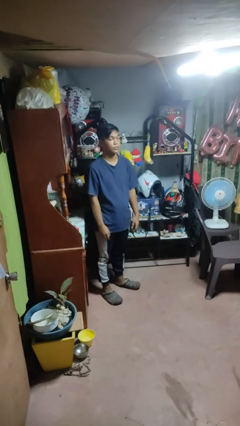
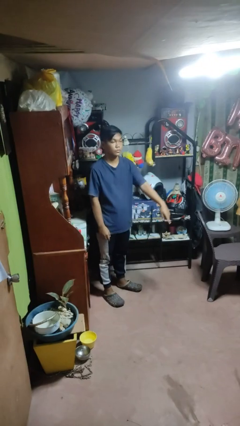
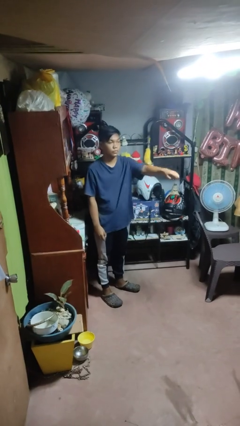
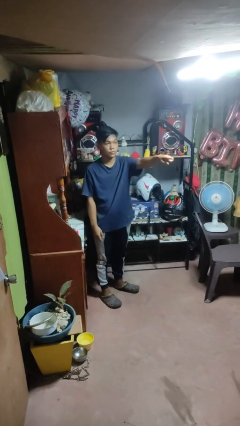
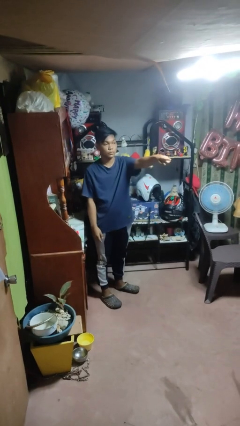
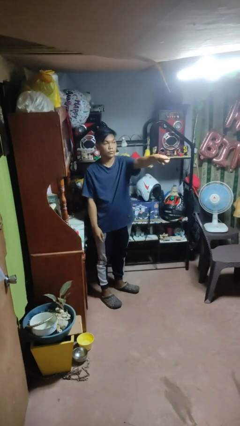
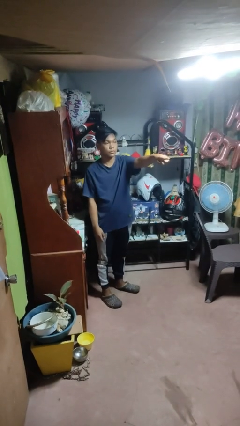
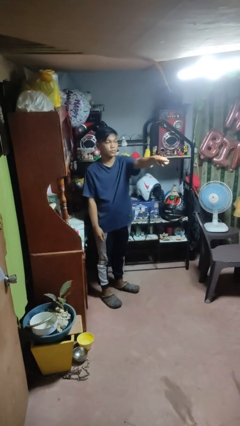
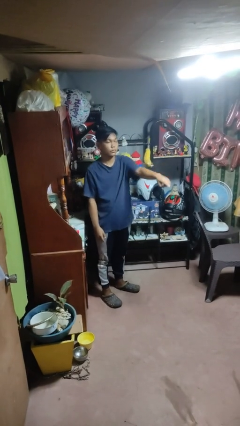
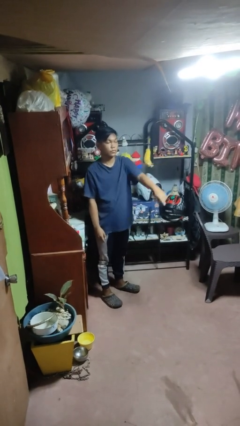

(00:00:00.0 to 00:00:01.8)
person points at person

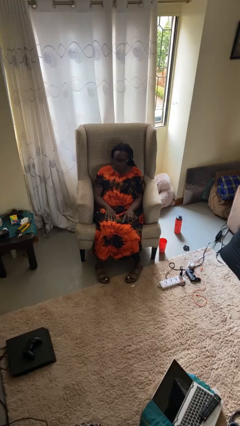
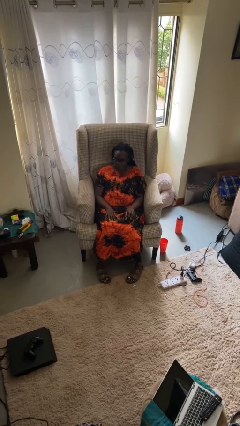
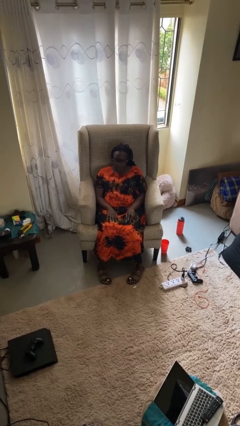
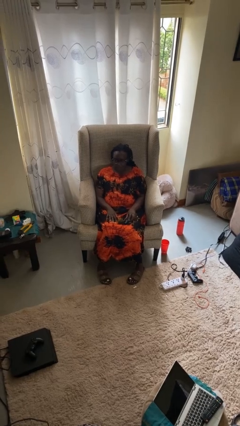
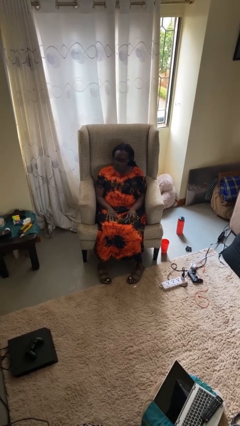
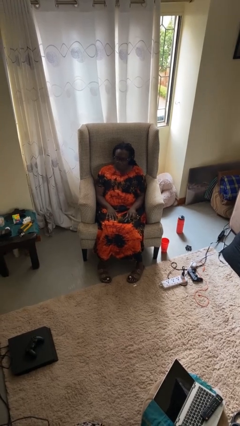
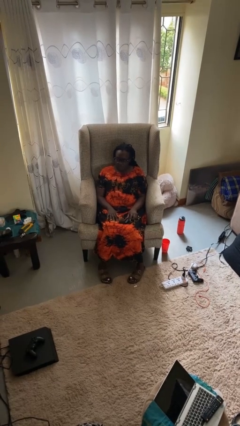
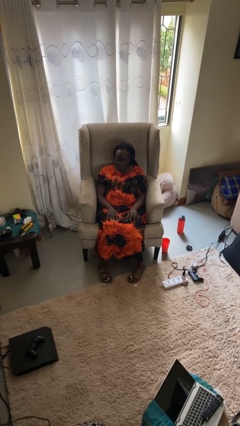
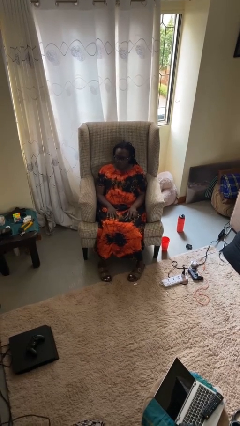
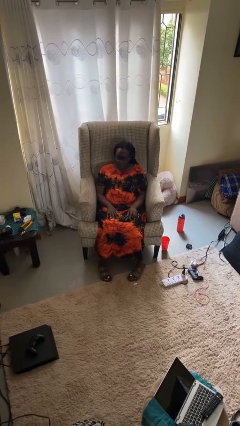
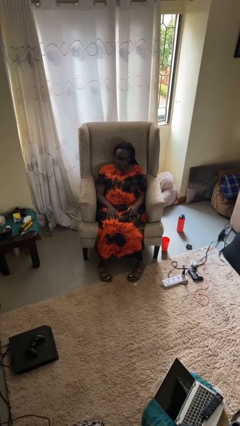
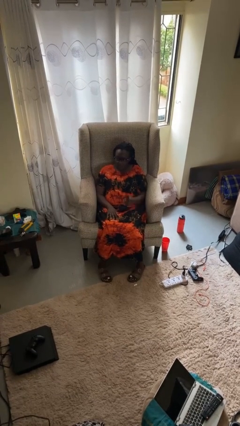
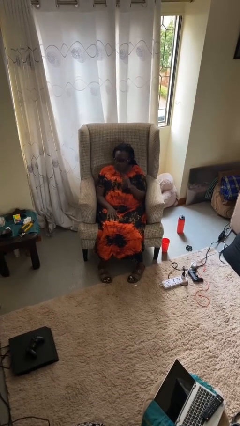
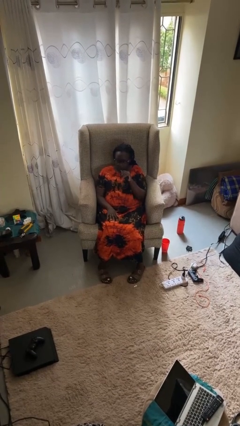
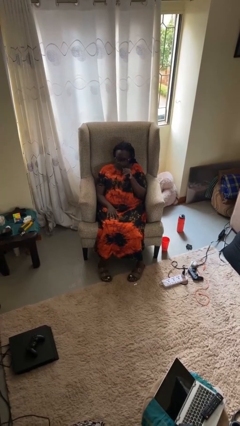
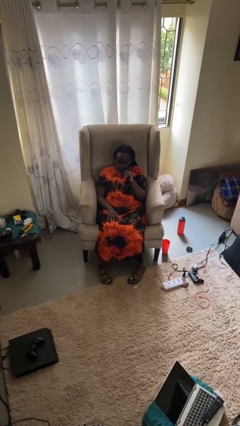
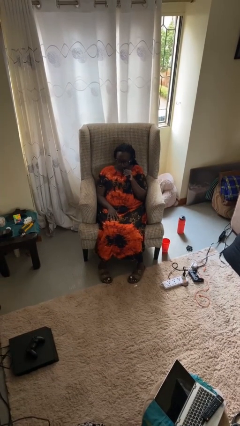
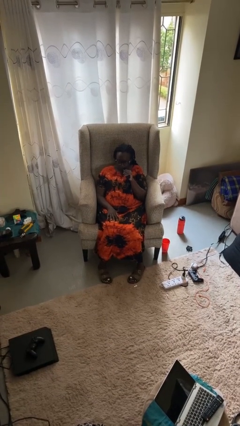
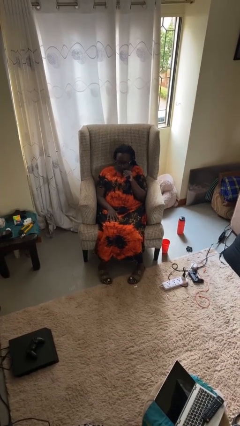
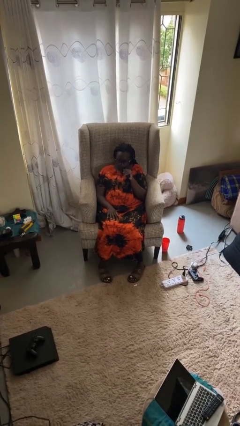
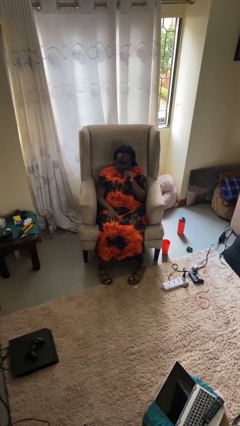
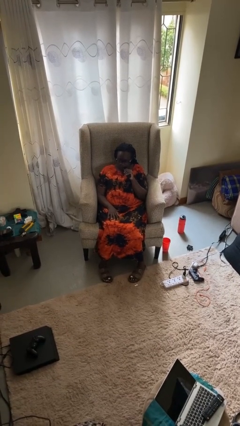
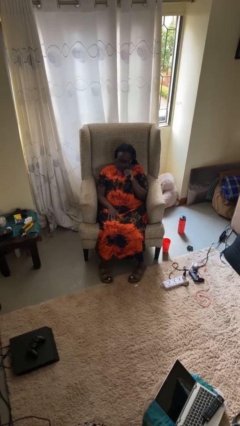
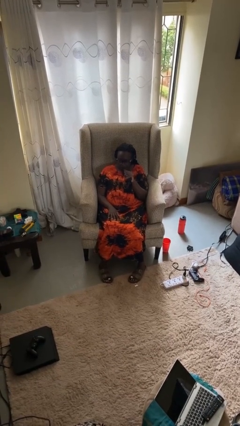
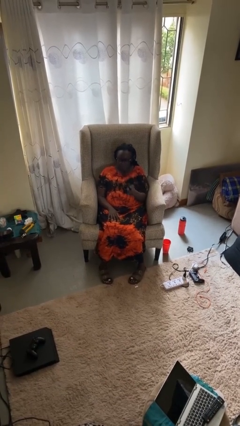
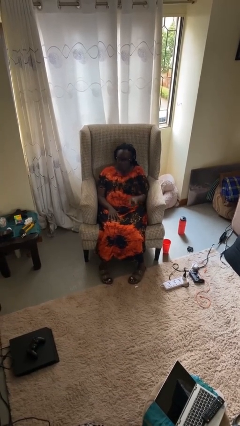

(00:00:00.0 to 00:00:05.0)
person vapes

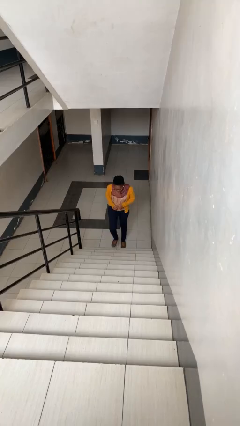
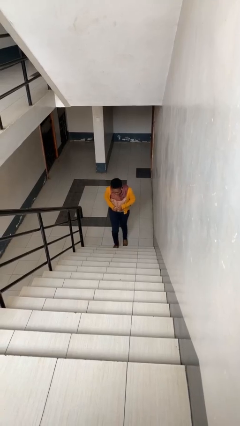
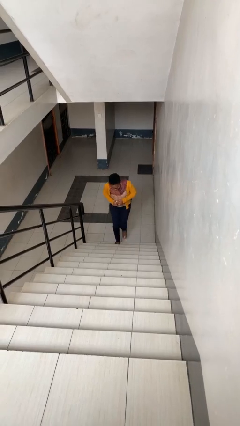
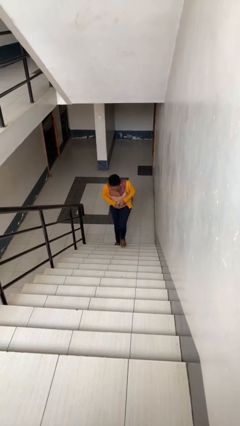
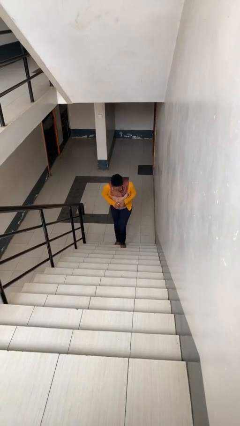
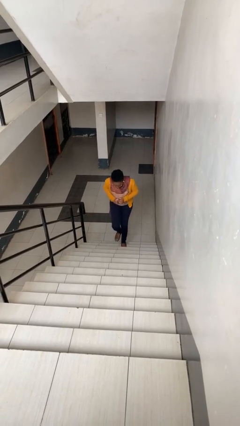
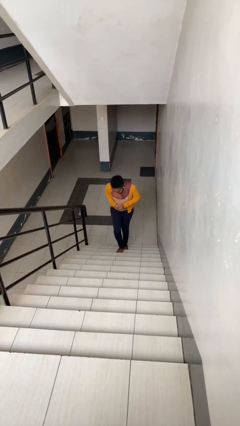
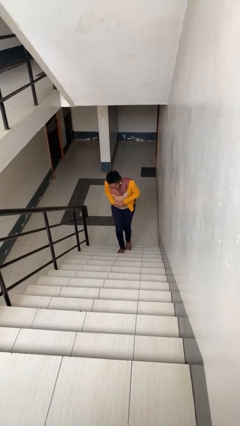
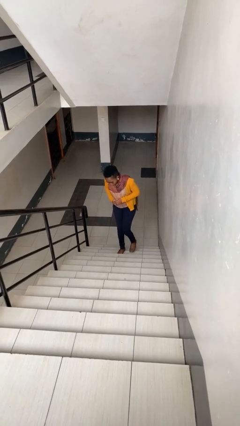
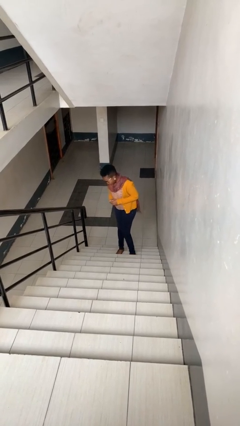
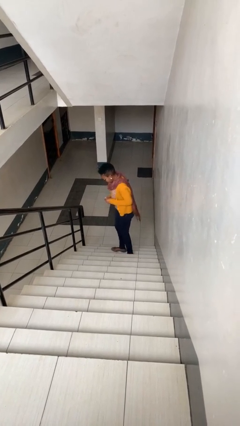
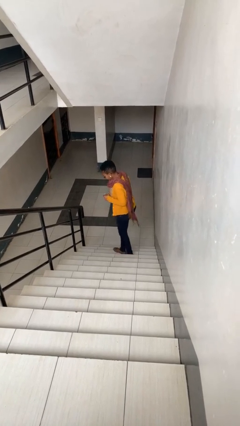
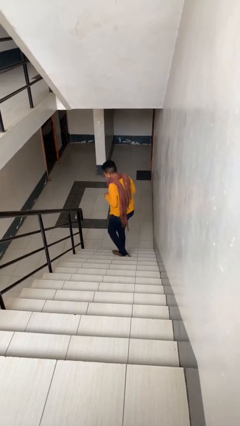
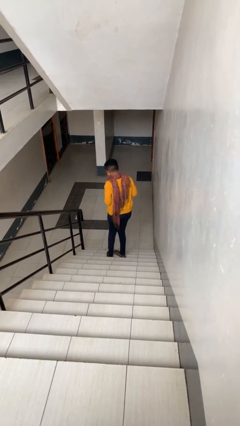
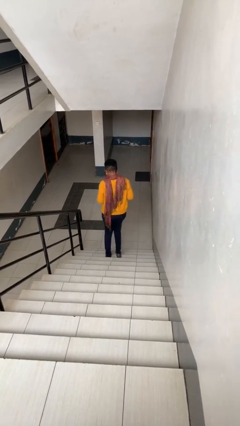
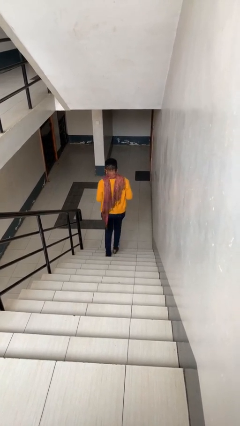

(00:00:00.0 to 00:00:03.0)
person climbs up stairs

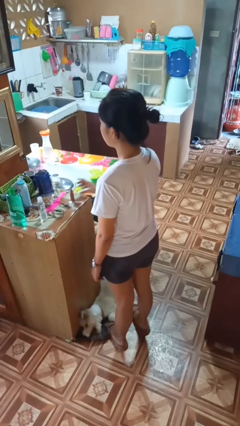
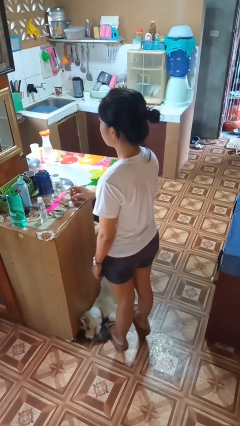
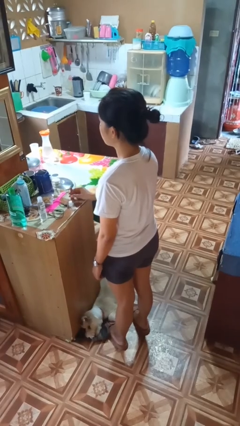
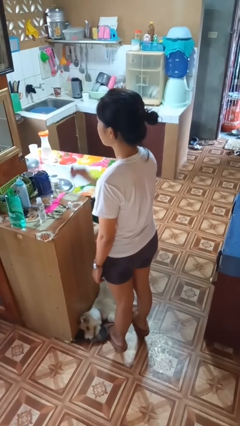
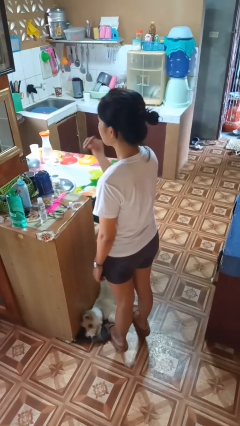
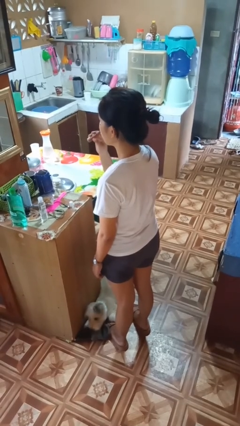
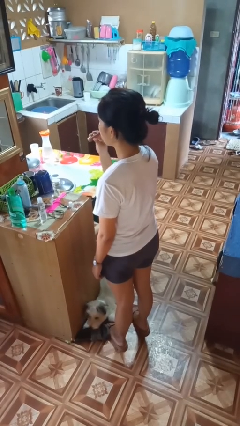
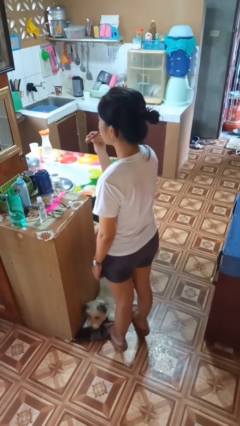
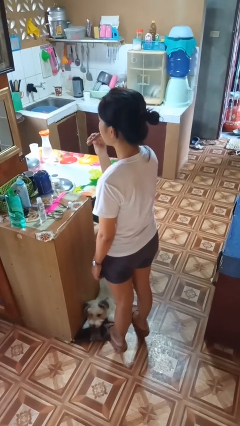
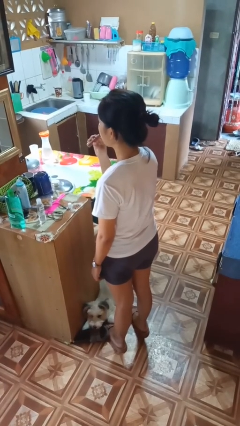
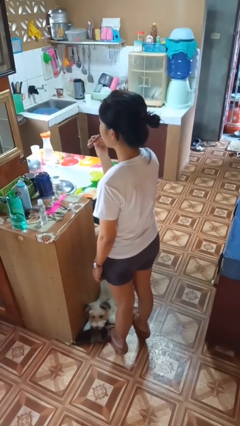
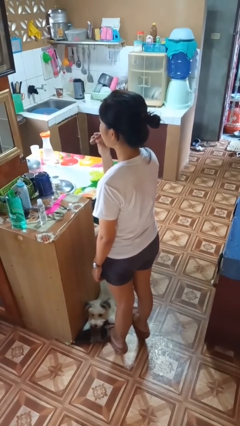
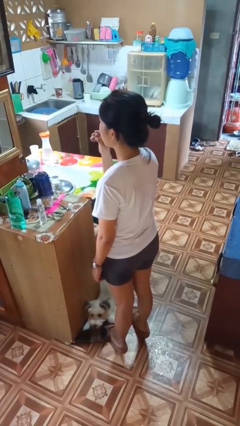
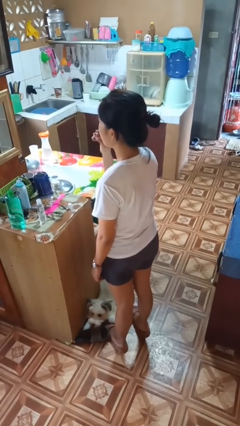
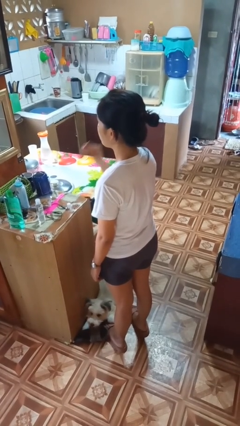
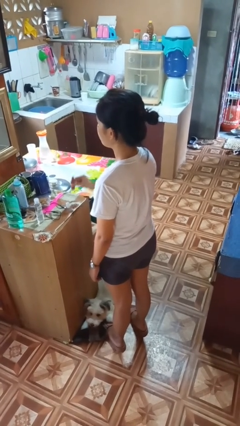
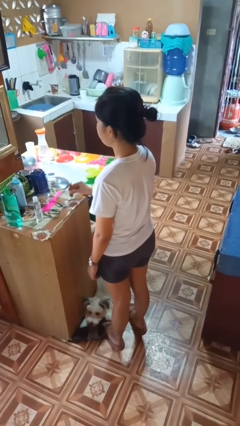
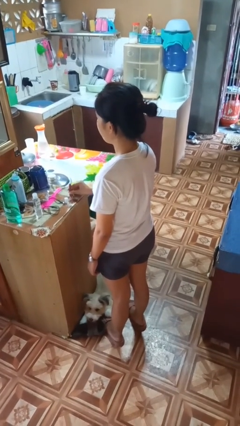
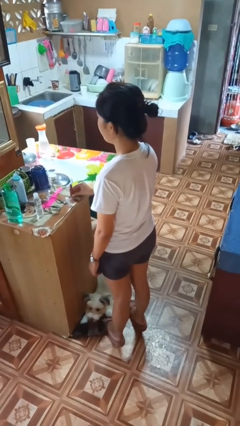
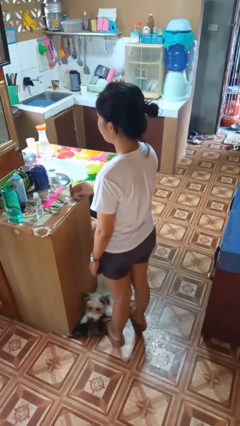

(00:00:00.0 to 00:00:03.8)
person applies lip makeup

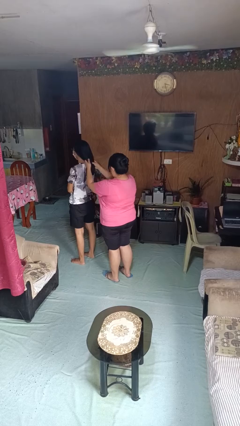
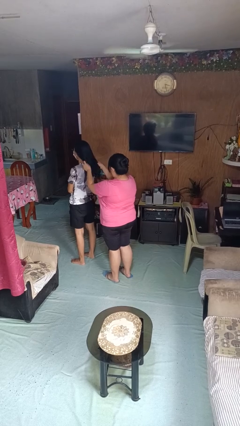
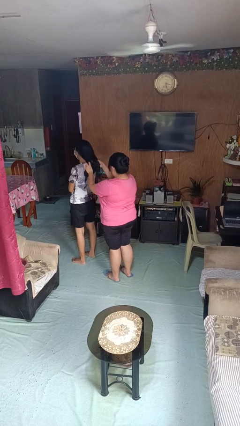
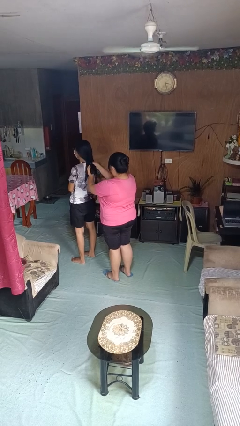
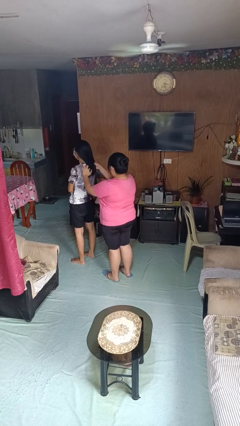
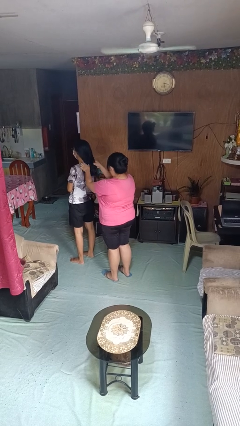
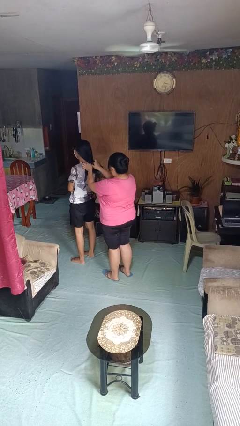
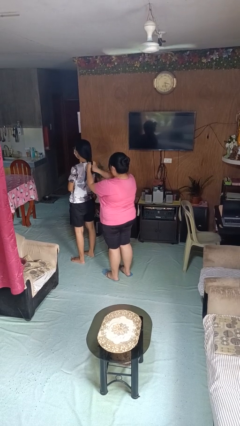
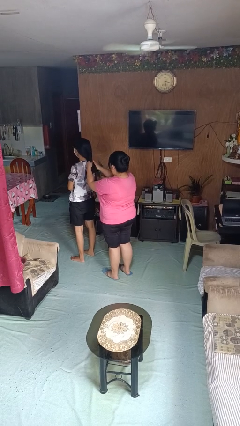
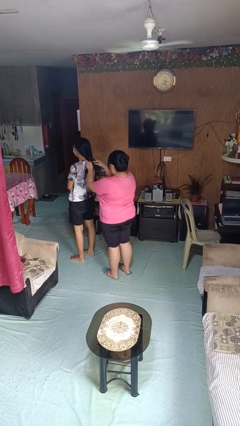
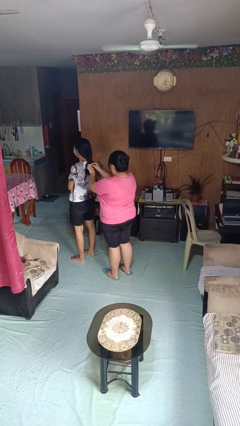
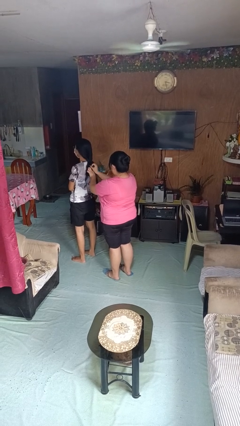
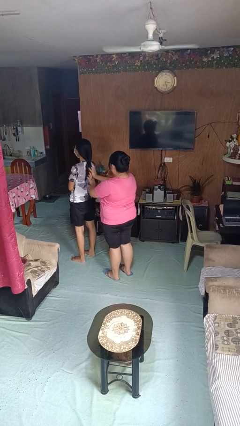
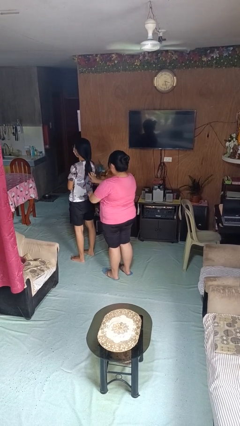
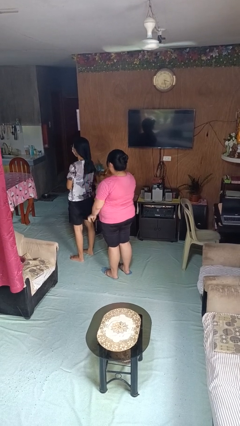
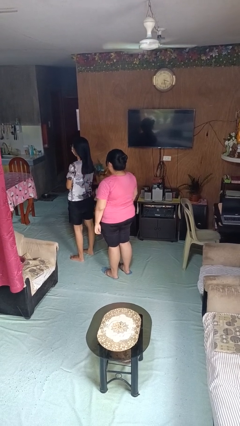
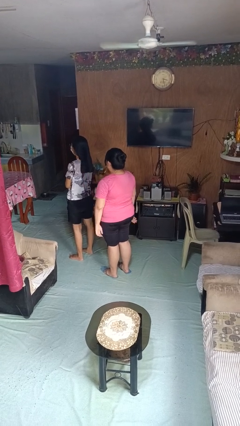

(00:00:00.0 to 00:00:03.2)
person braids hair of person

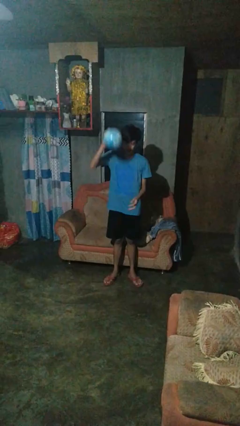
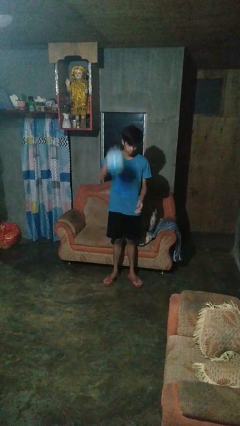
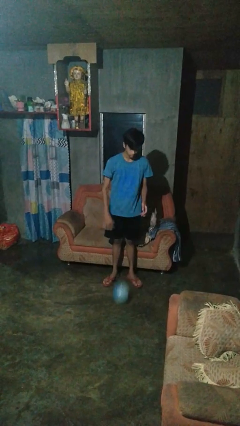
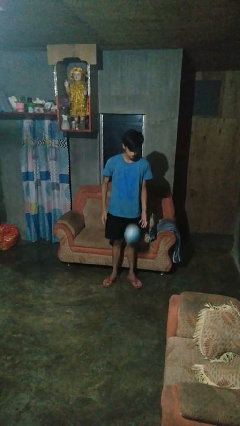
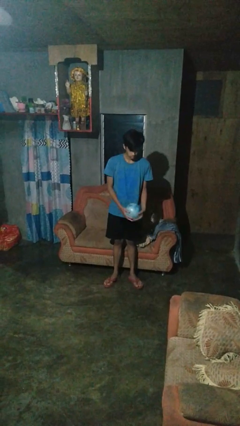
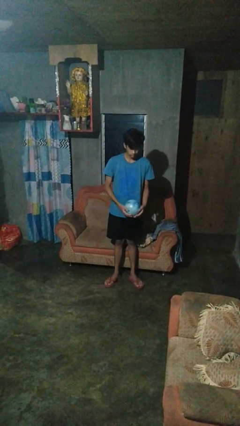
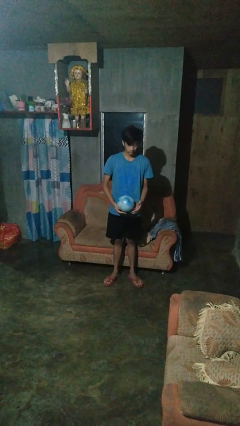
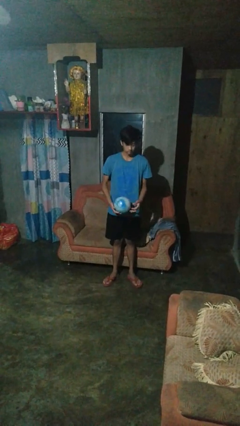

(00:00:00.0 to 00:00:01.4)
person bounces ball on floor
